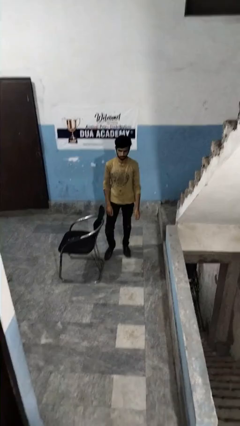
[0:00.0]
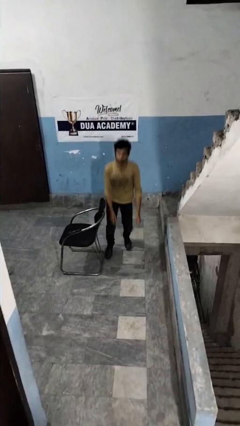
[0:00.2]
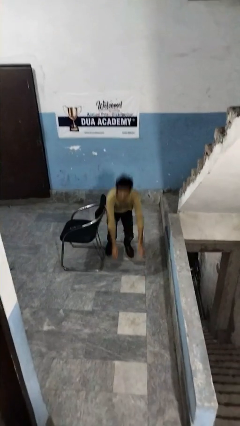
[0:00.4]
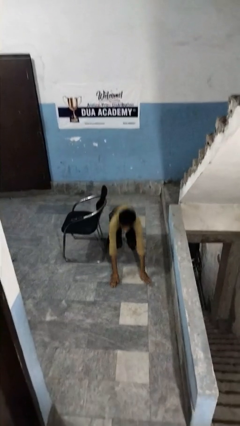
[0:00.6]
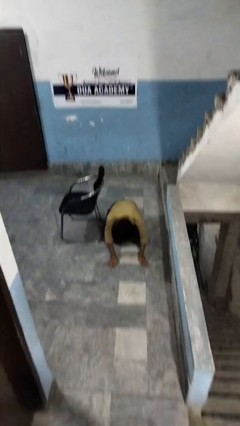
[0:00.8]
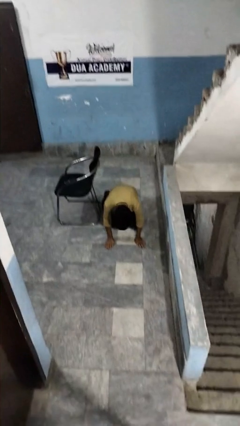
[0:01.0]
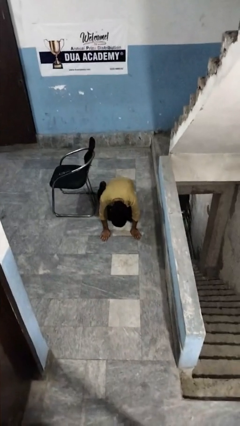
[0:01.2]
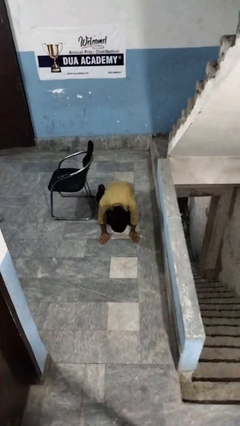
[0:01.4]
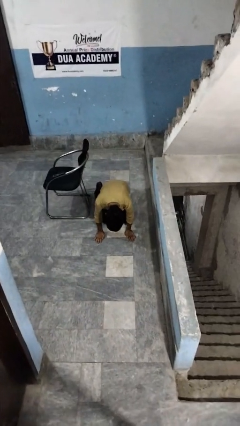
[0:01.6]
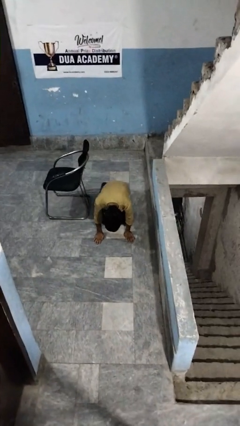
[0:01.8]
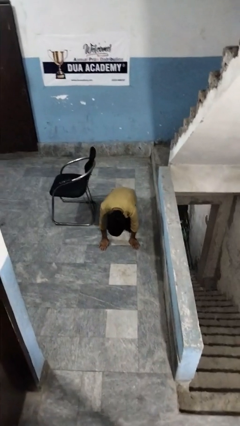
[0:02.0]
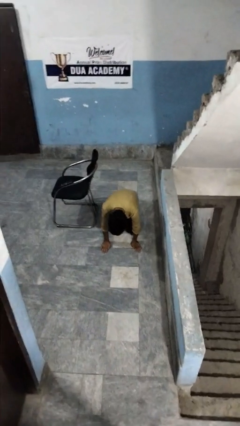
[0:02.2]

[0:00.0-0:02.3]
person trips on object on floor

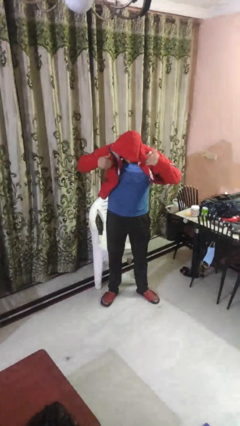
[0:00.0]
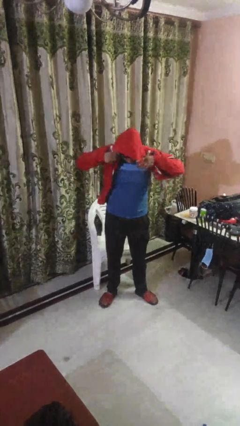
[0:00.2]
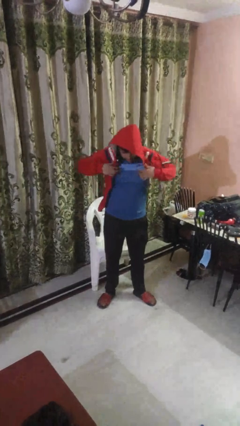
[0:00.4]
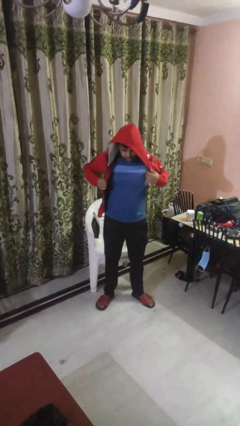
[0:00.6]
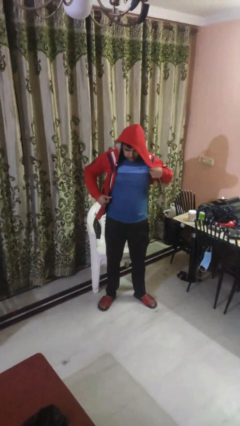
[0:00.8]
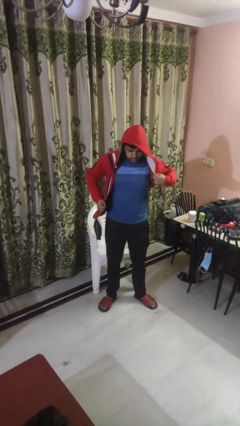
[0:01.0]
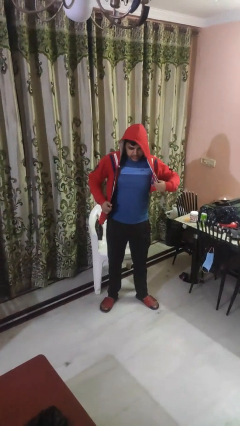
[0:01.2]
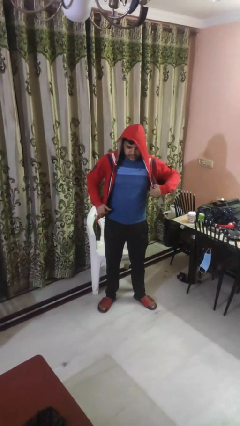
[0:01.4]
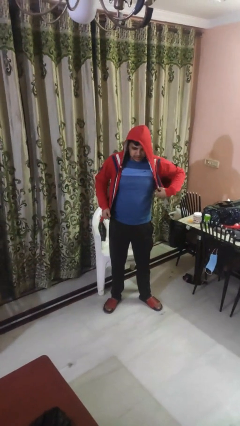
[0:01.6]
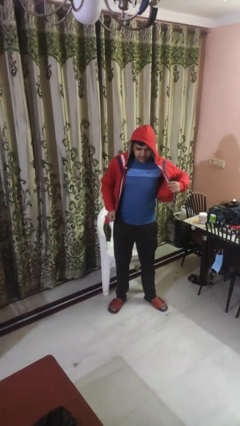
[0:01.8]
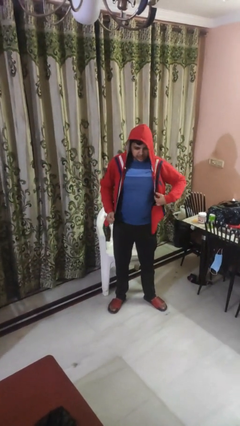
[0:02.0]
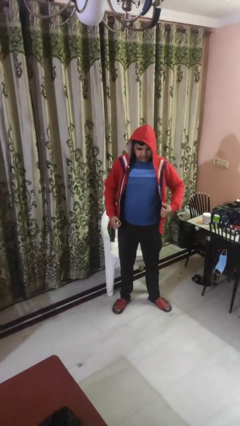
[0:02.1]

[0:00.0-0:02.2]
person puts on hoodie

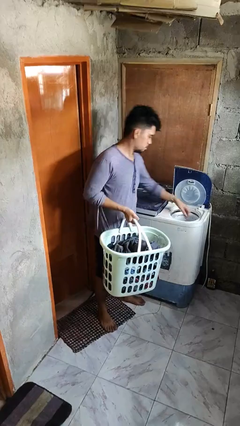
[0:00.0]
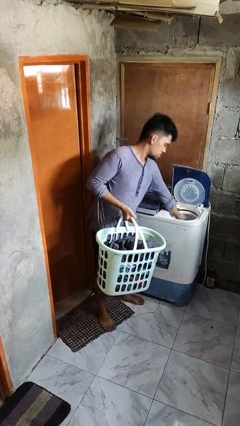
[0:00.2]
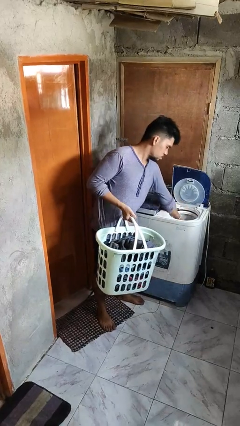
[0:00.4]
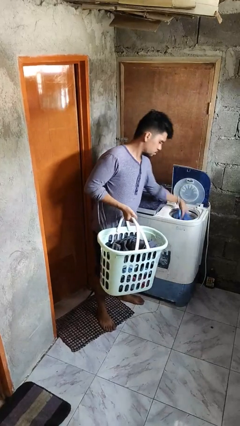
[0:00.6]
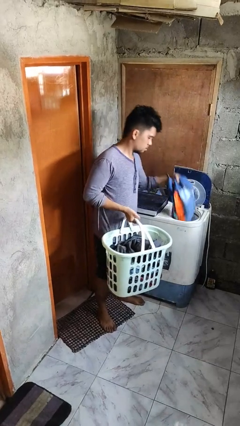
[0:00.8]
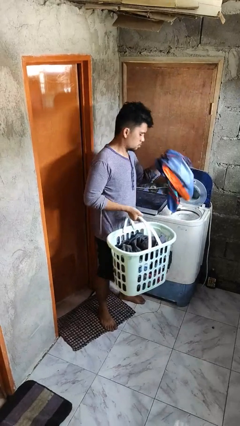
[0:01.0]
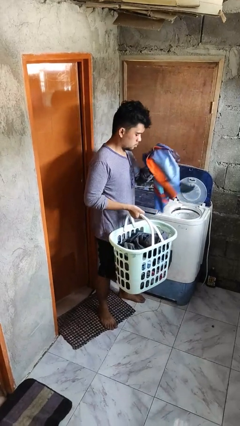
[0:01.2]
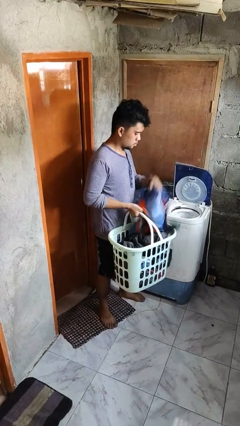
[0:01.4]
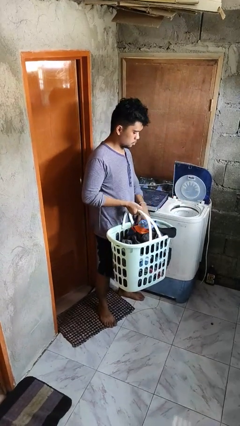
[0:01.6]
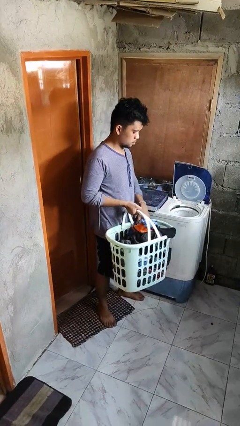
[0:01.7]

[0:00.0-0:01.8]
person unloads dryer

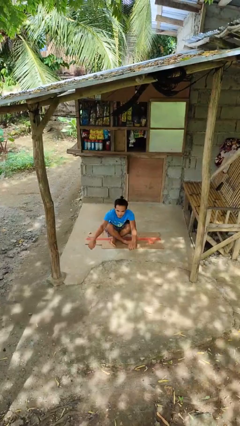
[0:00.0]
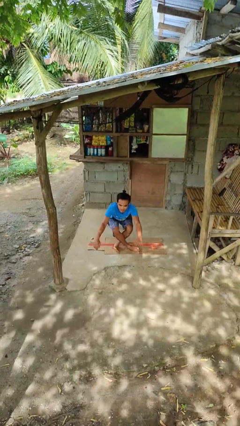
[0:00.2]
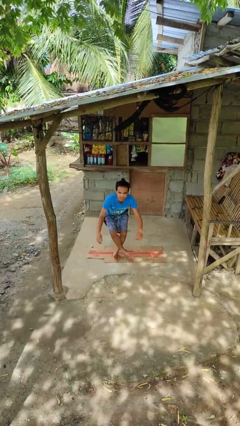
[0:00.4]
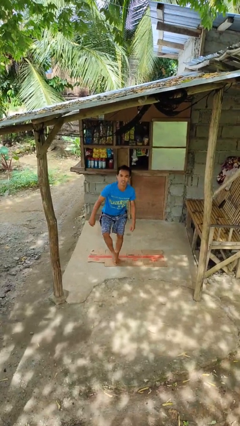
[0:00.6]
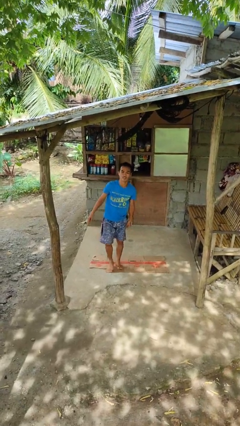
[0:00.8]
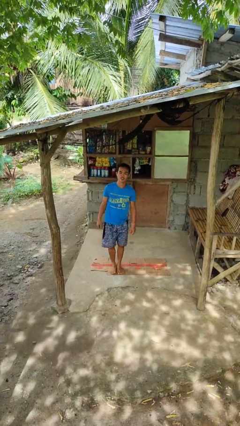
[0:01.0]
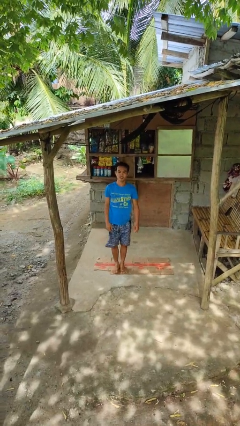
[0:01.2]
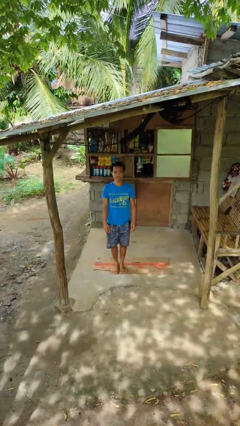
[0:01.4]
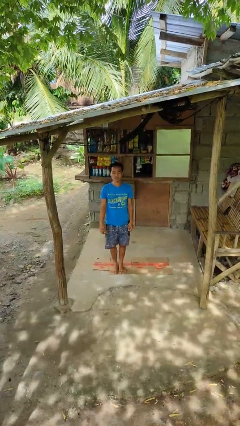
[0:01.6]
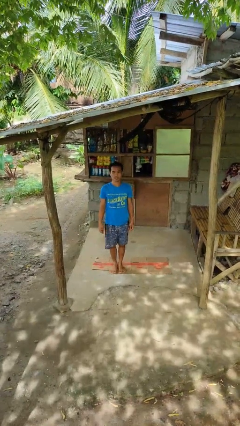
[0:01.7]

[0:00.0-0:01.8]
person stands up from floor

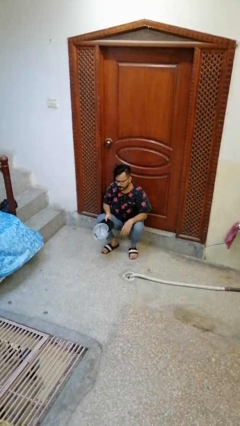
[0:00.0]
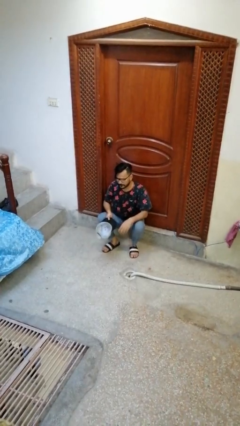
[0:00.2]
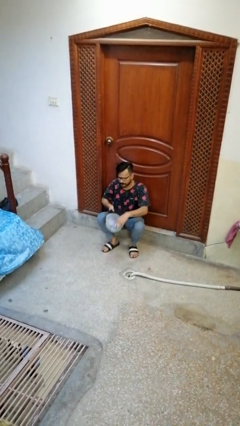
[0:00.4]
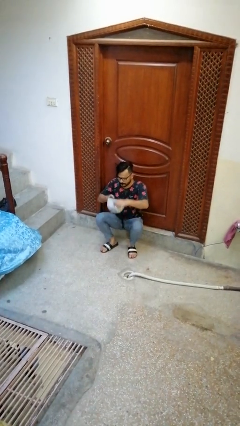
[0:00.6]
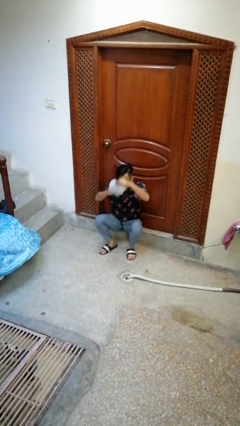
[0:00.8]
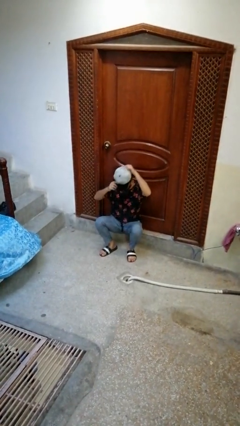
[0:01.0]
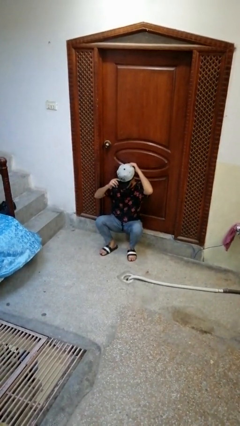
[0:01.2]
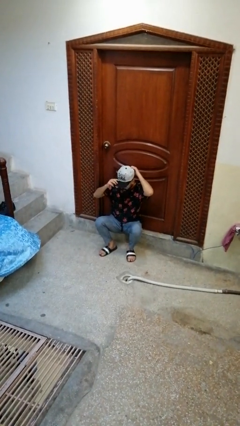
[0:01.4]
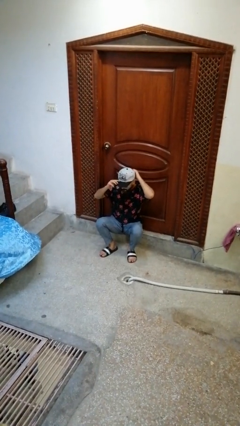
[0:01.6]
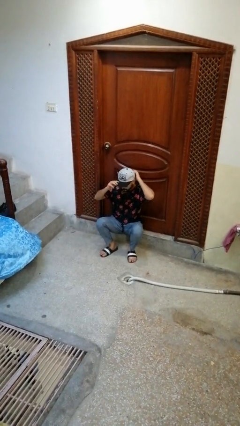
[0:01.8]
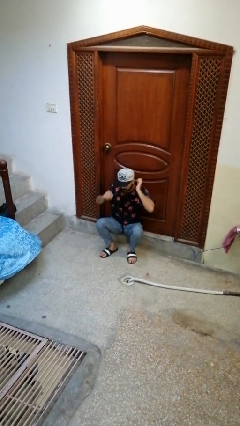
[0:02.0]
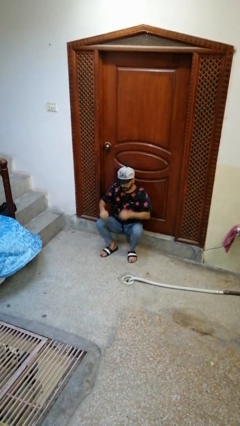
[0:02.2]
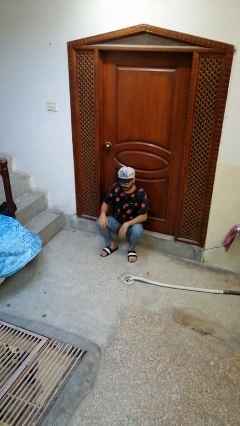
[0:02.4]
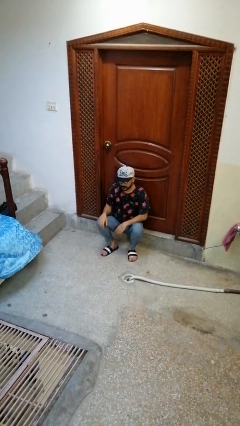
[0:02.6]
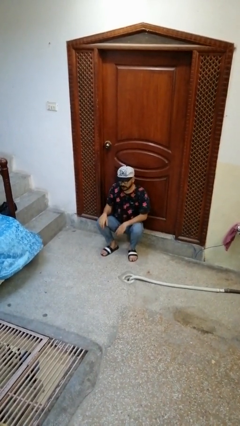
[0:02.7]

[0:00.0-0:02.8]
person puts on hat

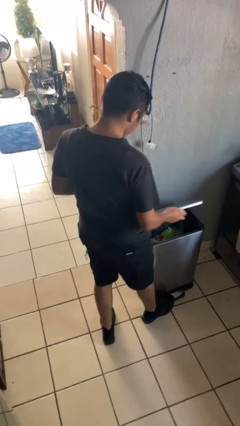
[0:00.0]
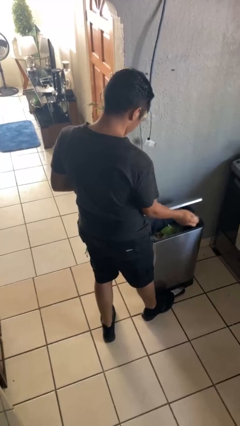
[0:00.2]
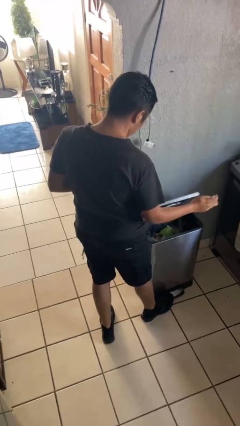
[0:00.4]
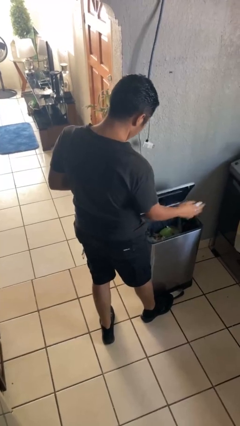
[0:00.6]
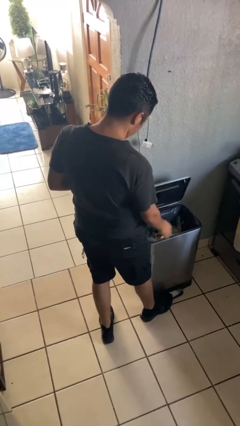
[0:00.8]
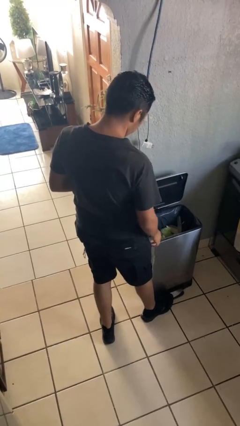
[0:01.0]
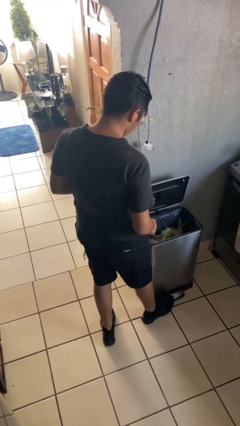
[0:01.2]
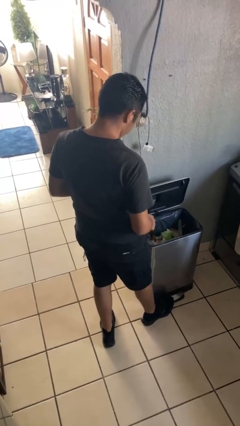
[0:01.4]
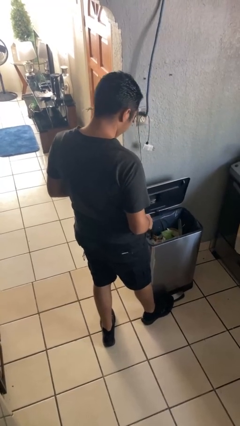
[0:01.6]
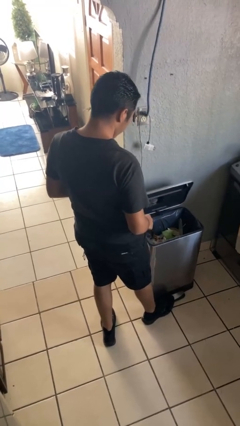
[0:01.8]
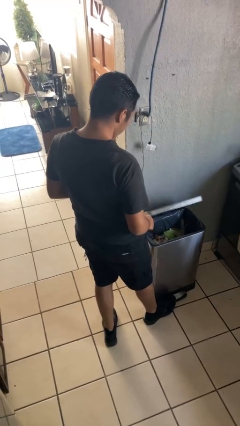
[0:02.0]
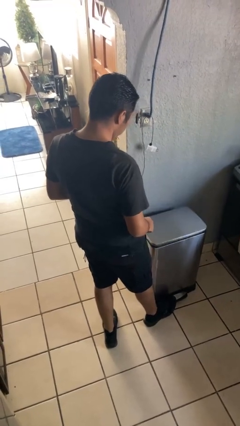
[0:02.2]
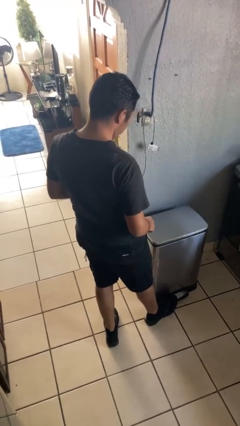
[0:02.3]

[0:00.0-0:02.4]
person discards trash

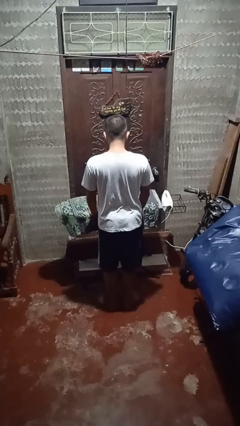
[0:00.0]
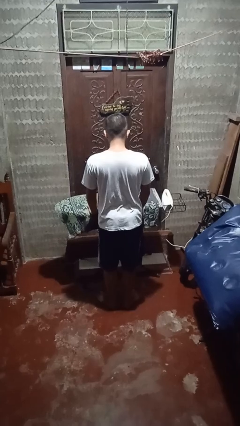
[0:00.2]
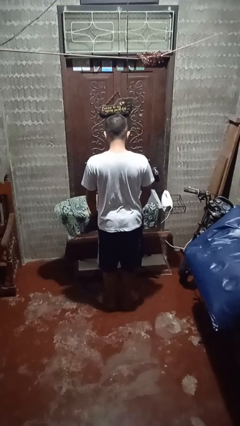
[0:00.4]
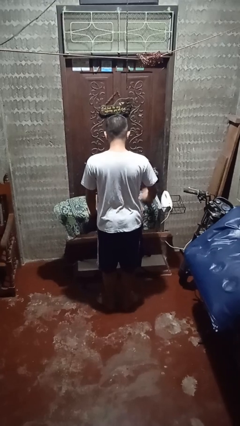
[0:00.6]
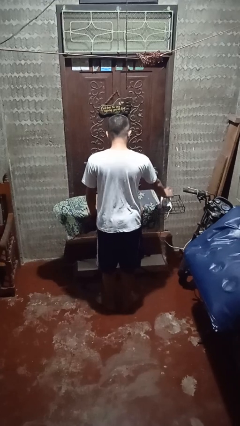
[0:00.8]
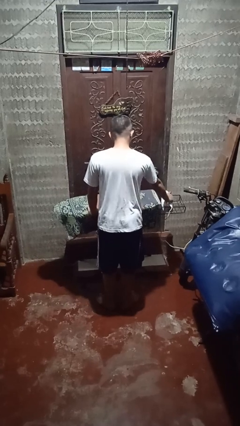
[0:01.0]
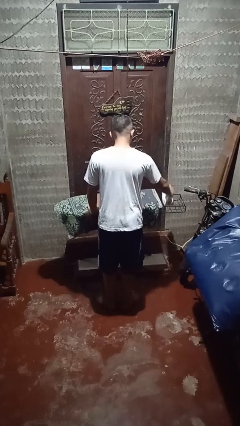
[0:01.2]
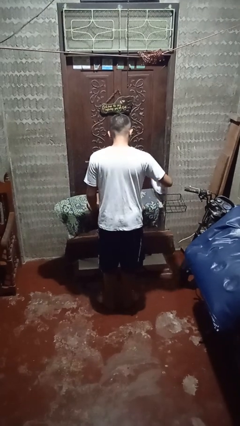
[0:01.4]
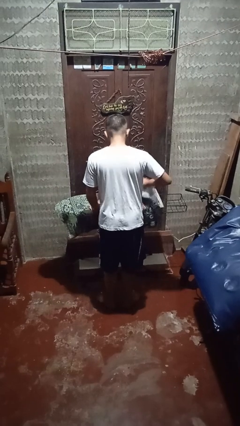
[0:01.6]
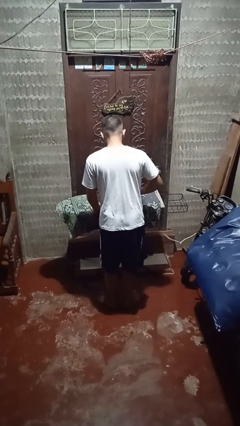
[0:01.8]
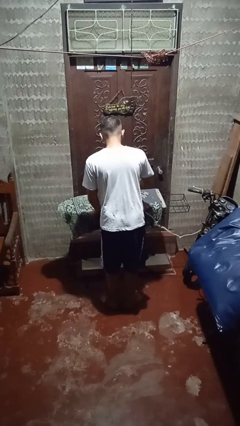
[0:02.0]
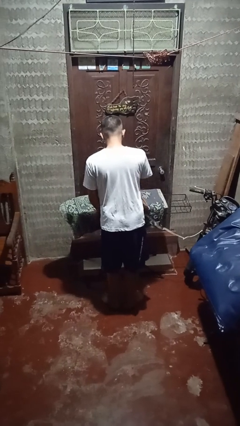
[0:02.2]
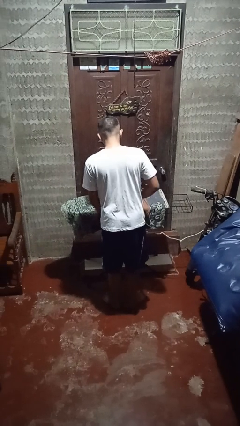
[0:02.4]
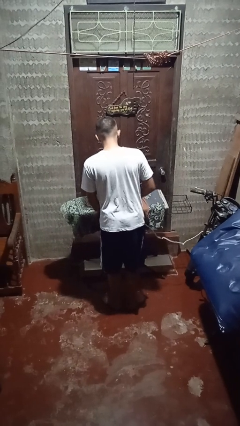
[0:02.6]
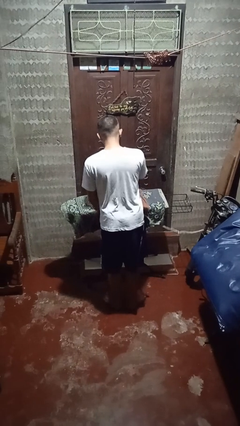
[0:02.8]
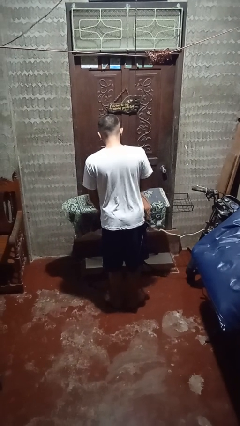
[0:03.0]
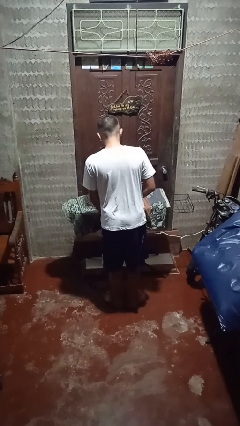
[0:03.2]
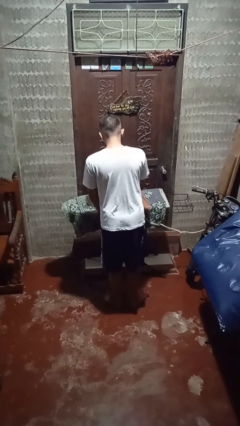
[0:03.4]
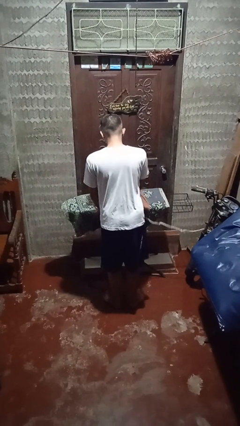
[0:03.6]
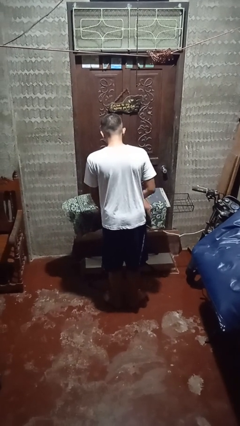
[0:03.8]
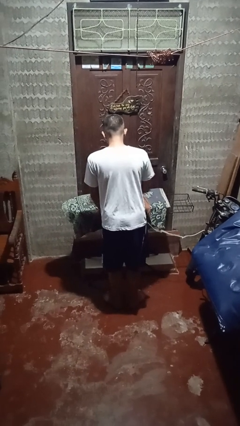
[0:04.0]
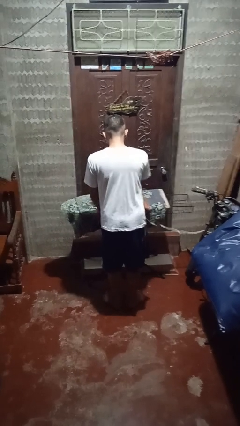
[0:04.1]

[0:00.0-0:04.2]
person irons clothes
